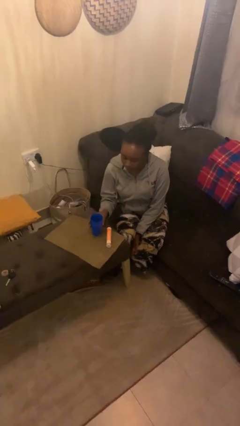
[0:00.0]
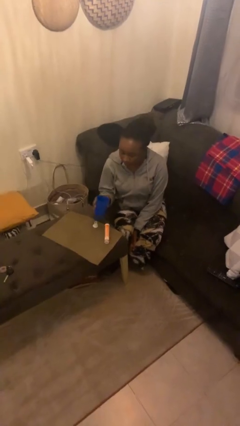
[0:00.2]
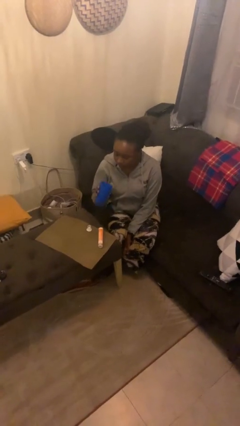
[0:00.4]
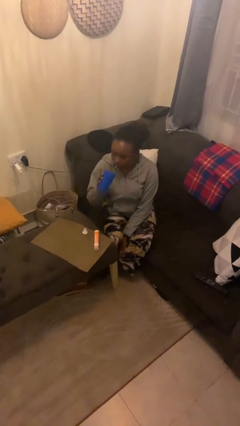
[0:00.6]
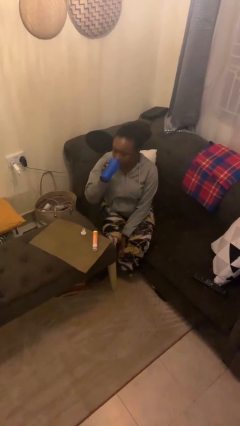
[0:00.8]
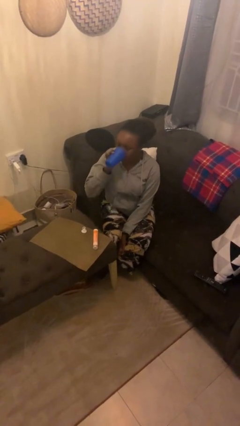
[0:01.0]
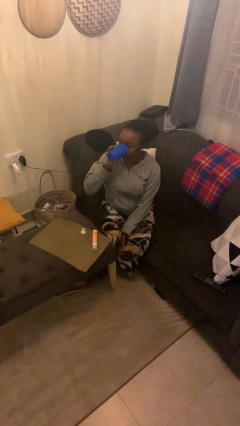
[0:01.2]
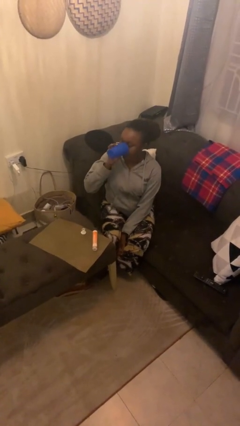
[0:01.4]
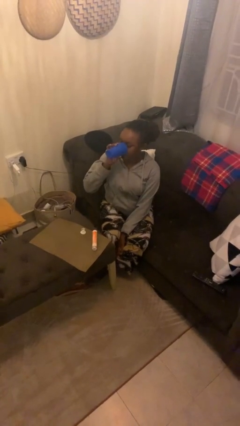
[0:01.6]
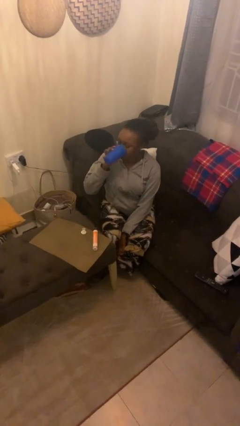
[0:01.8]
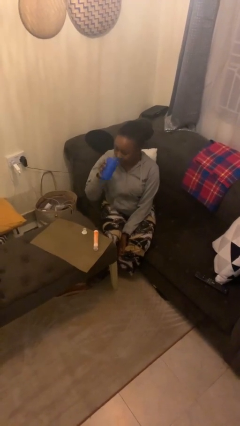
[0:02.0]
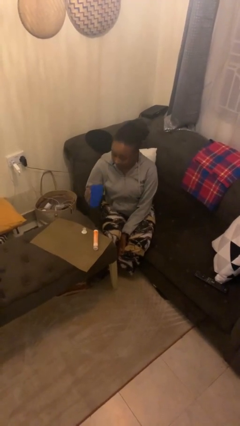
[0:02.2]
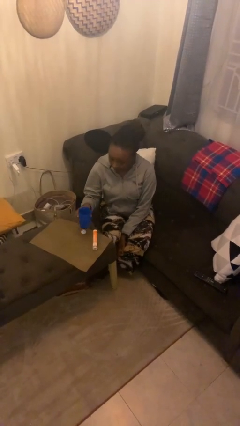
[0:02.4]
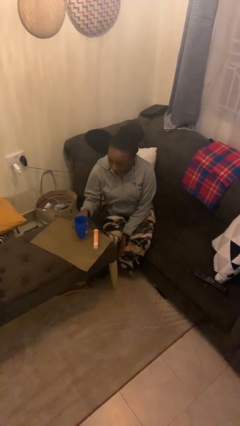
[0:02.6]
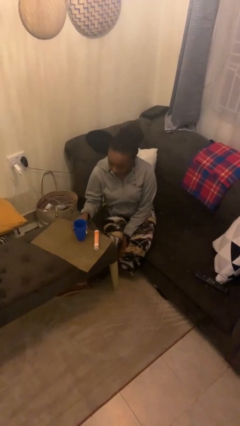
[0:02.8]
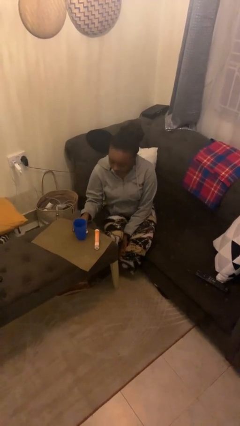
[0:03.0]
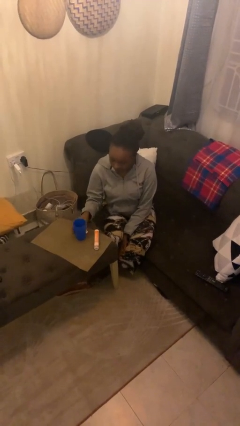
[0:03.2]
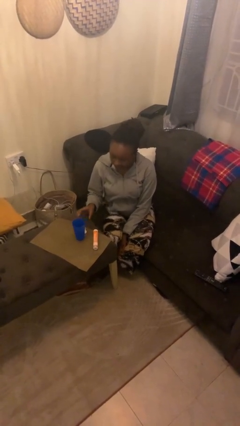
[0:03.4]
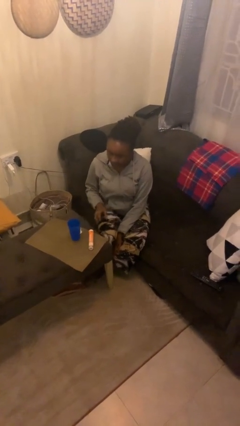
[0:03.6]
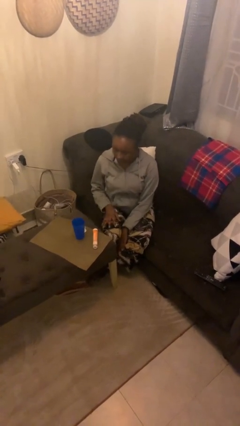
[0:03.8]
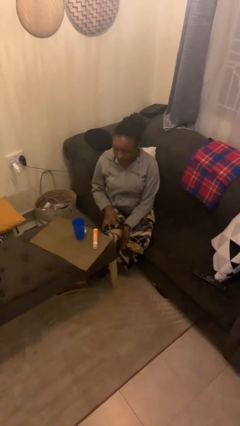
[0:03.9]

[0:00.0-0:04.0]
person drinks from cup

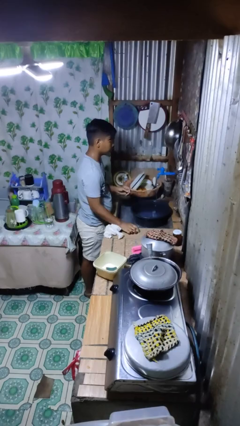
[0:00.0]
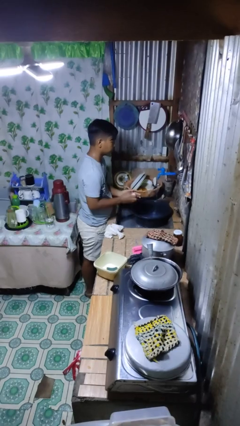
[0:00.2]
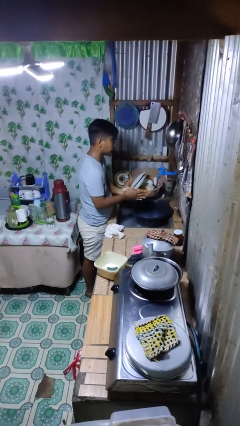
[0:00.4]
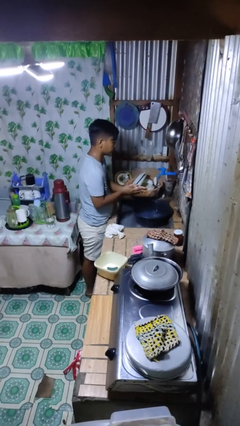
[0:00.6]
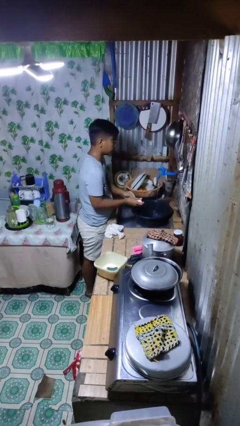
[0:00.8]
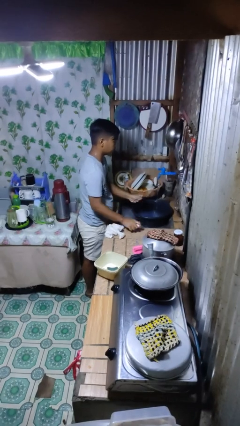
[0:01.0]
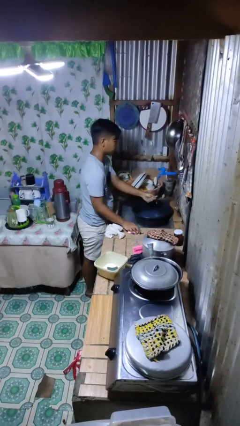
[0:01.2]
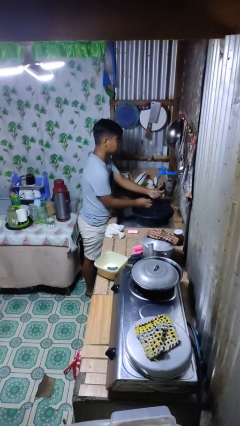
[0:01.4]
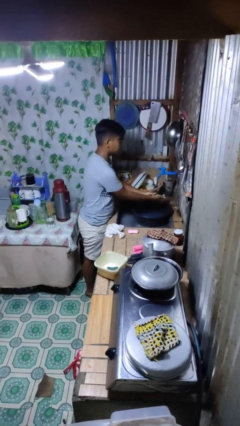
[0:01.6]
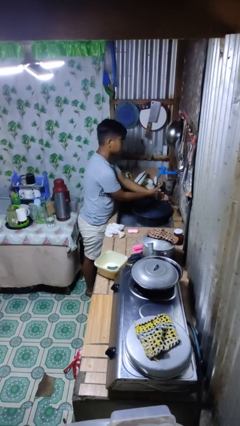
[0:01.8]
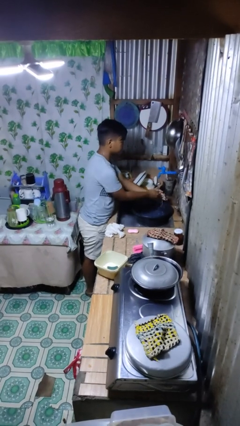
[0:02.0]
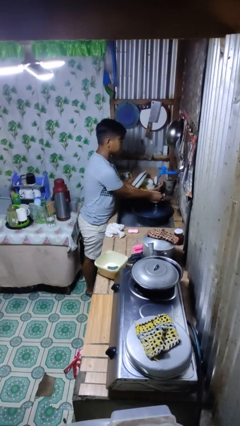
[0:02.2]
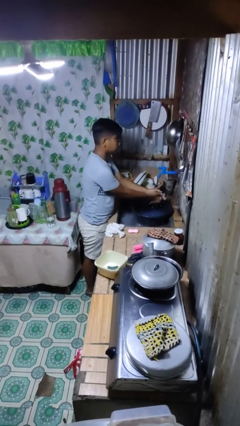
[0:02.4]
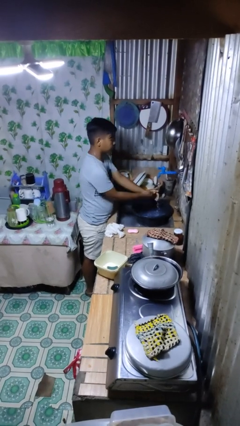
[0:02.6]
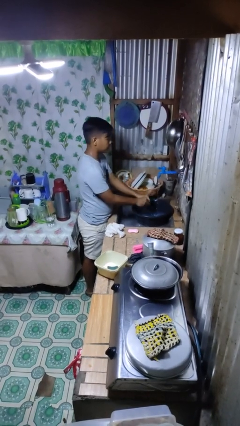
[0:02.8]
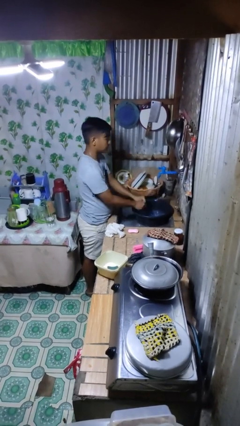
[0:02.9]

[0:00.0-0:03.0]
person washes hands

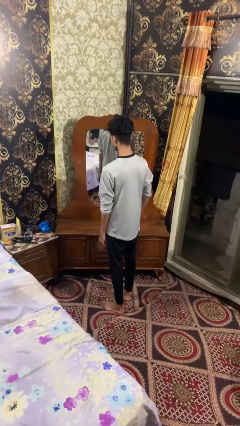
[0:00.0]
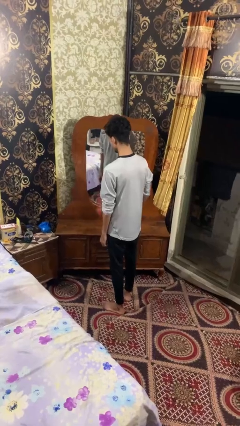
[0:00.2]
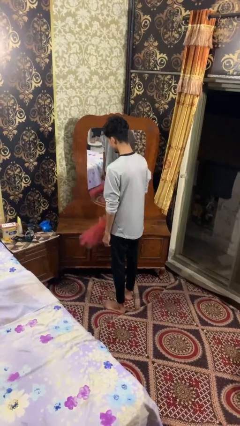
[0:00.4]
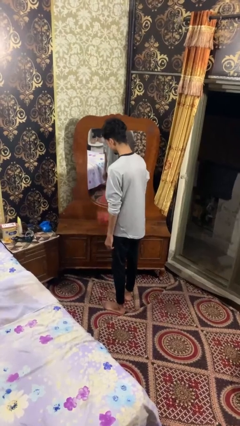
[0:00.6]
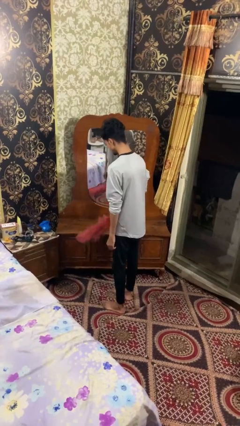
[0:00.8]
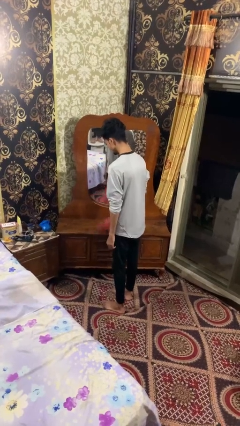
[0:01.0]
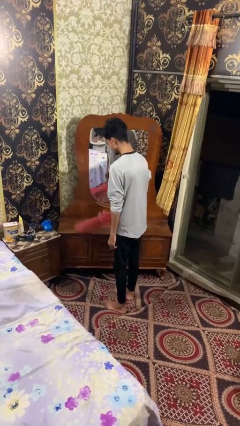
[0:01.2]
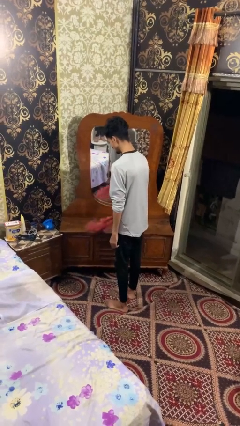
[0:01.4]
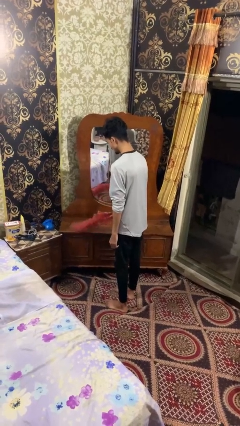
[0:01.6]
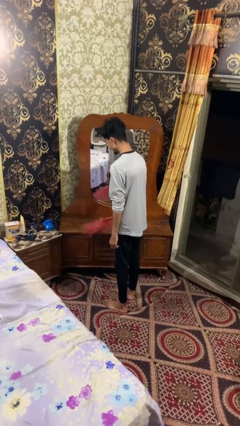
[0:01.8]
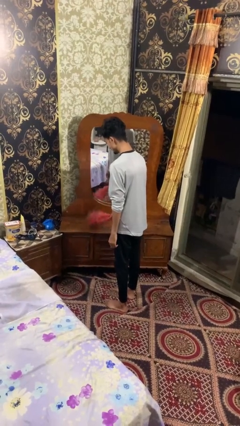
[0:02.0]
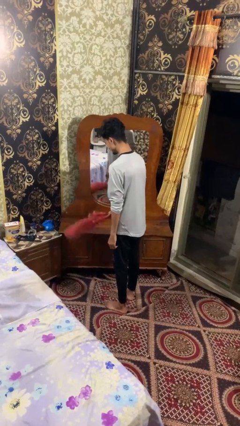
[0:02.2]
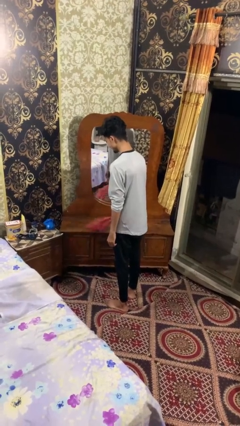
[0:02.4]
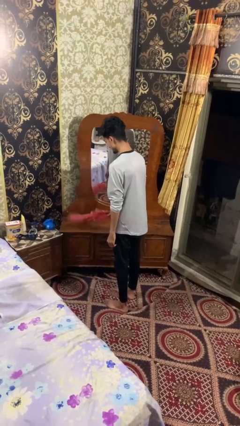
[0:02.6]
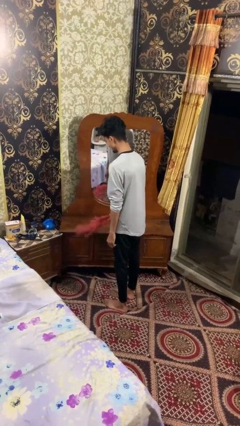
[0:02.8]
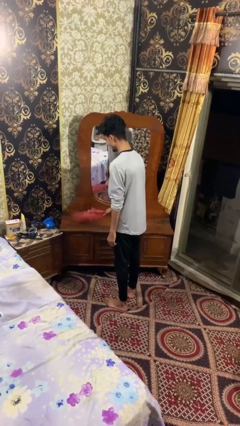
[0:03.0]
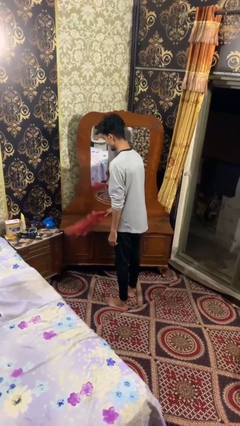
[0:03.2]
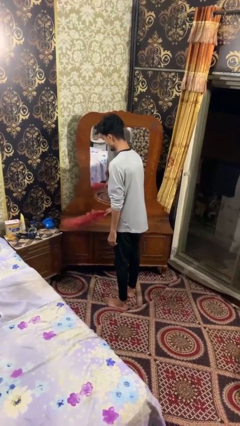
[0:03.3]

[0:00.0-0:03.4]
person dusts furniture

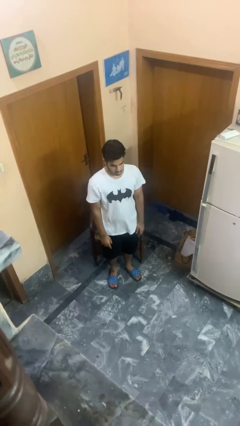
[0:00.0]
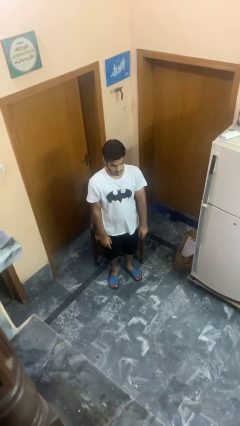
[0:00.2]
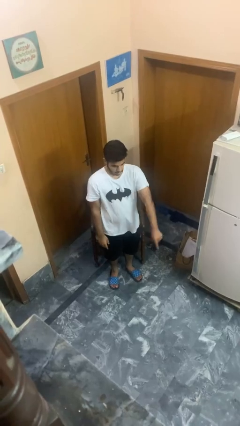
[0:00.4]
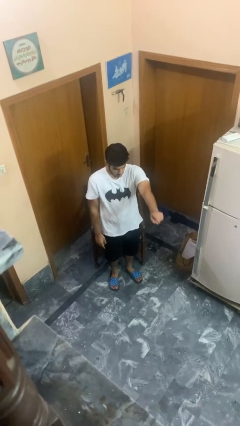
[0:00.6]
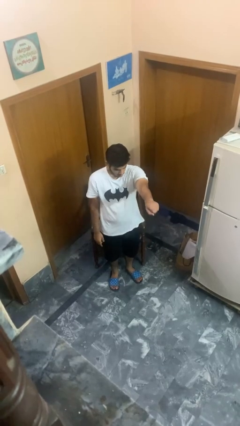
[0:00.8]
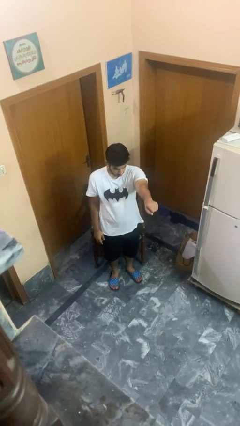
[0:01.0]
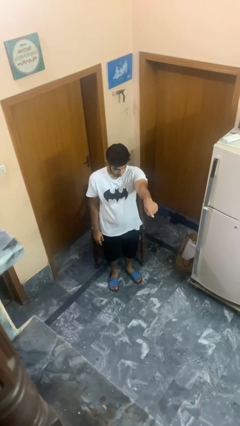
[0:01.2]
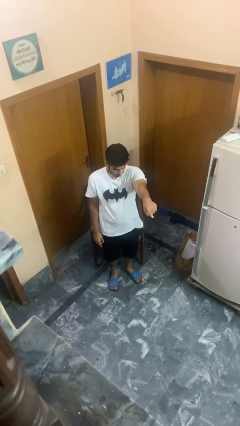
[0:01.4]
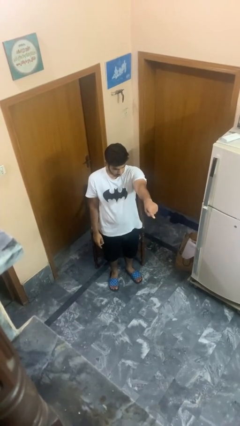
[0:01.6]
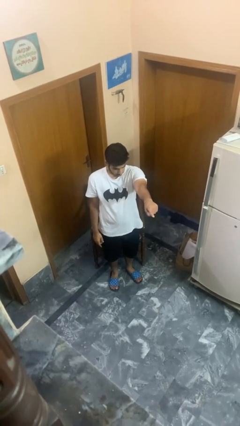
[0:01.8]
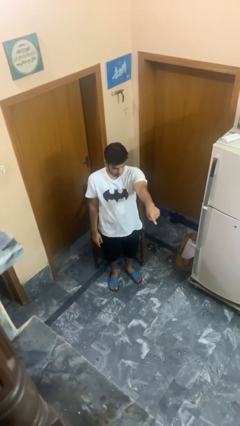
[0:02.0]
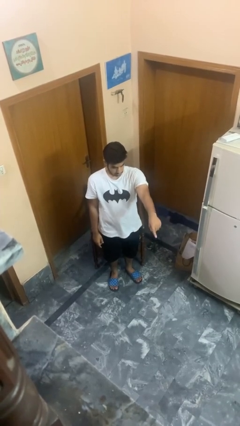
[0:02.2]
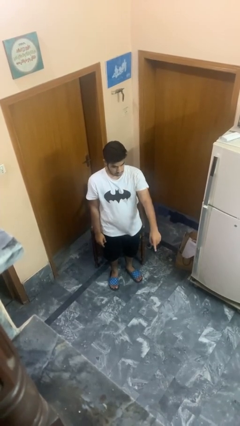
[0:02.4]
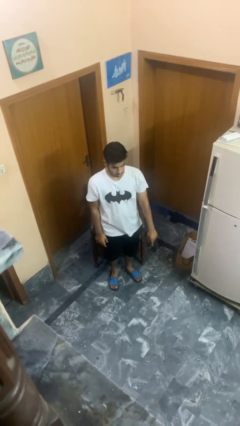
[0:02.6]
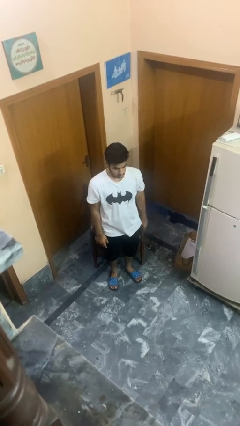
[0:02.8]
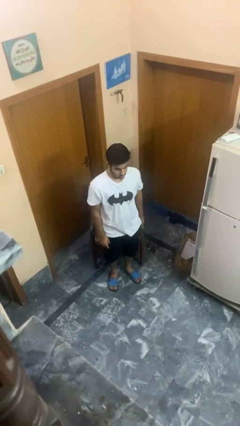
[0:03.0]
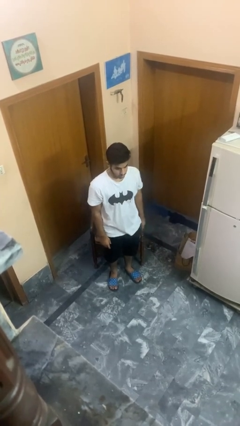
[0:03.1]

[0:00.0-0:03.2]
person points at person

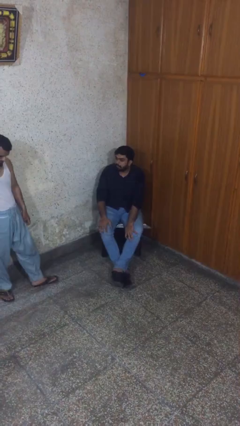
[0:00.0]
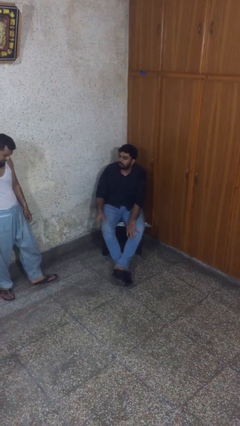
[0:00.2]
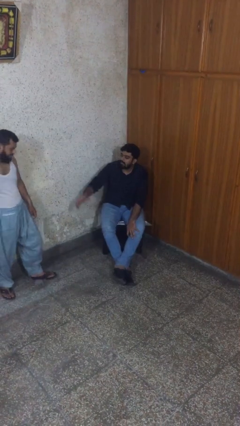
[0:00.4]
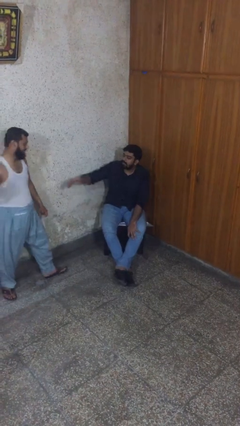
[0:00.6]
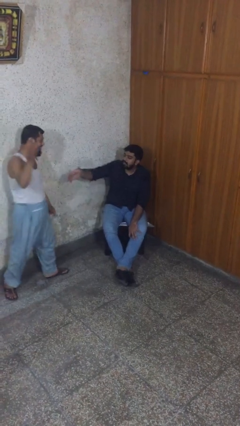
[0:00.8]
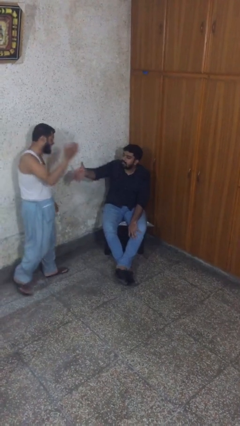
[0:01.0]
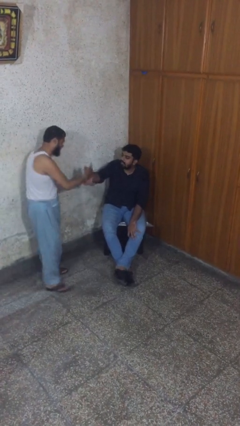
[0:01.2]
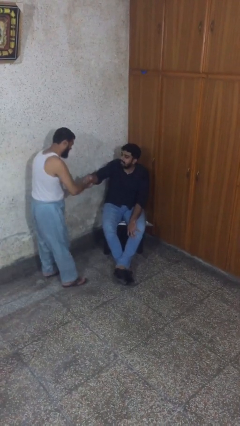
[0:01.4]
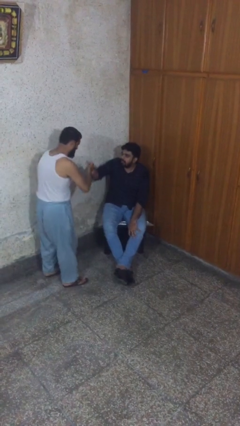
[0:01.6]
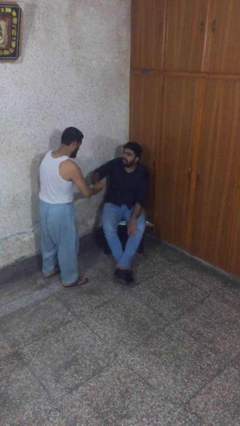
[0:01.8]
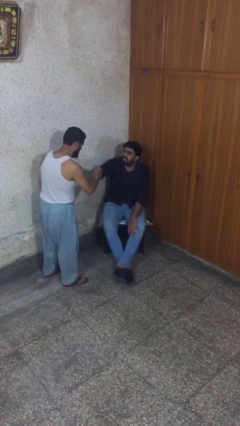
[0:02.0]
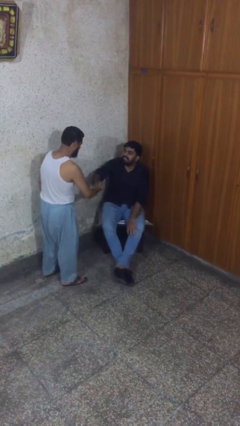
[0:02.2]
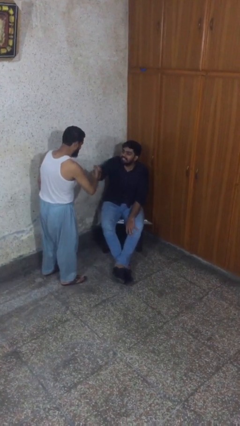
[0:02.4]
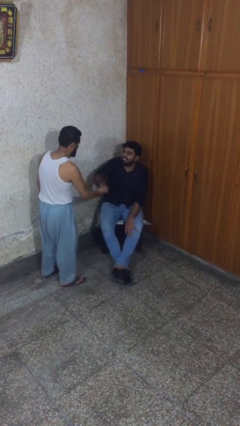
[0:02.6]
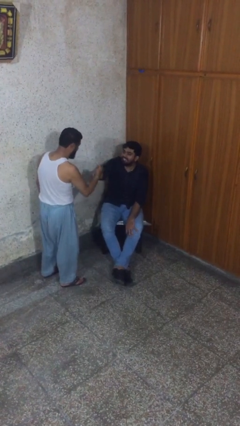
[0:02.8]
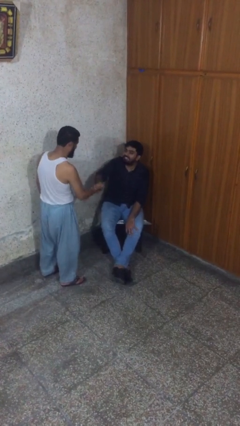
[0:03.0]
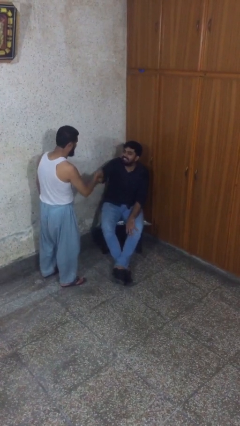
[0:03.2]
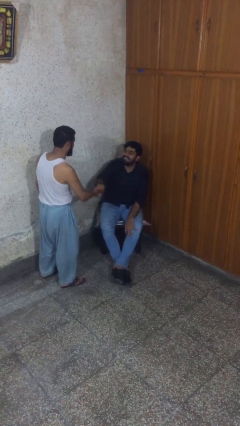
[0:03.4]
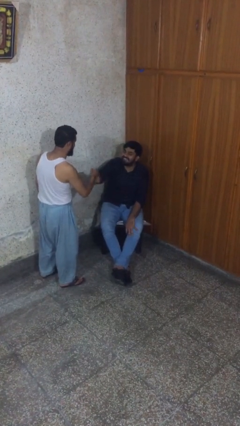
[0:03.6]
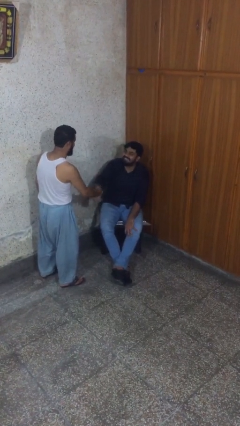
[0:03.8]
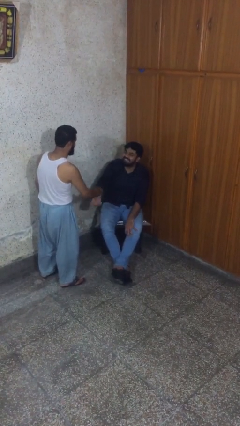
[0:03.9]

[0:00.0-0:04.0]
person shakes hand

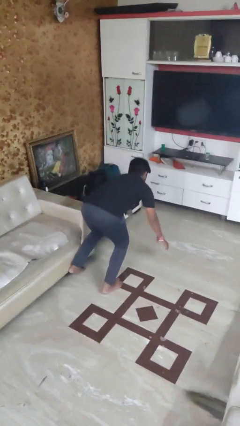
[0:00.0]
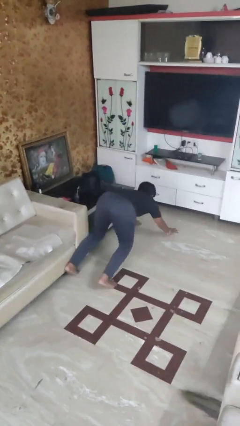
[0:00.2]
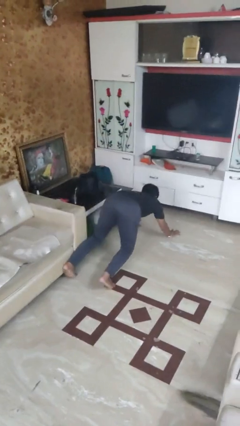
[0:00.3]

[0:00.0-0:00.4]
person trips on object on floor
